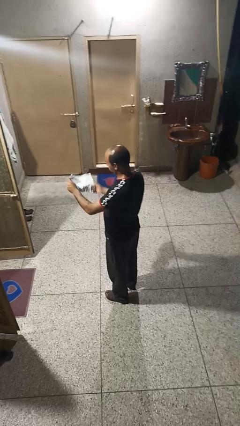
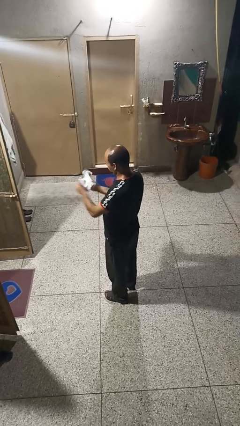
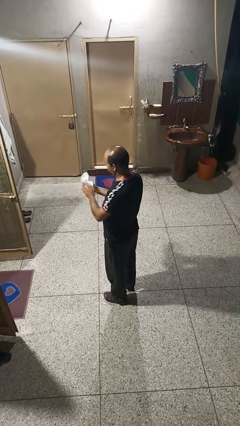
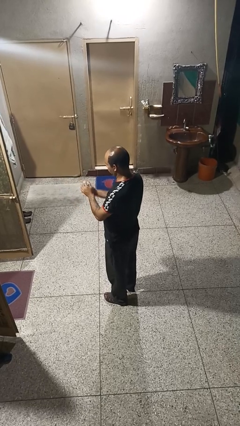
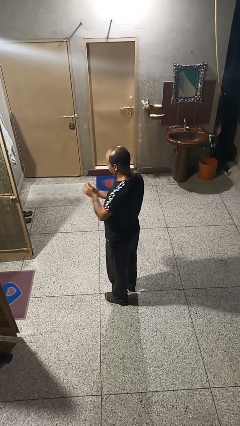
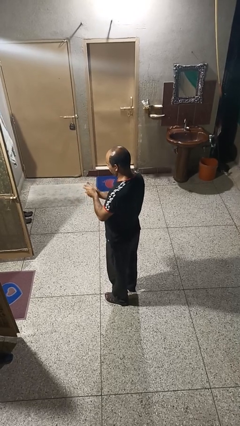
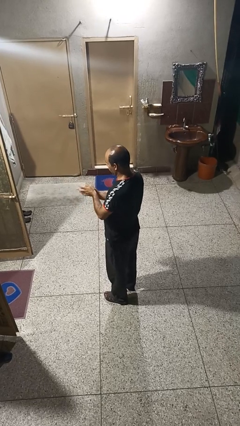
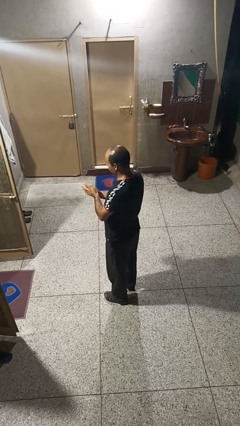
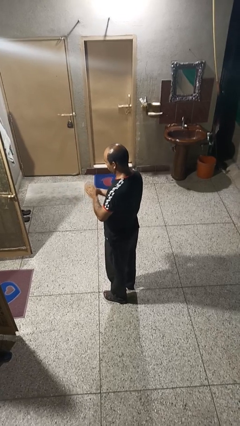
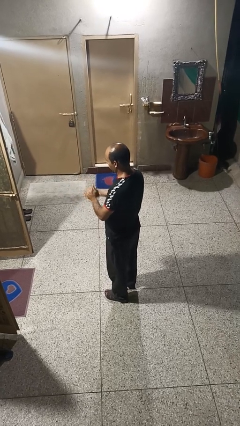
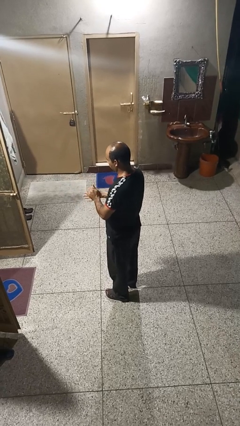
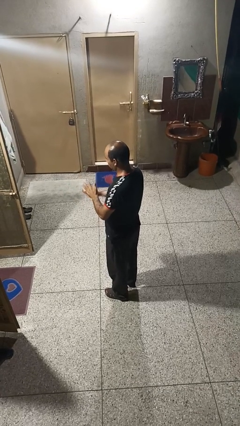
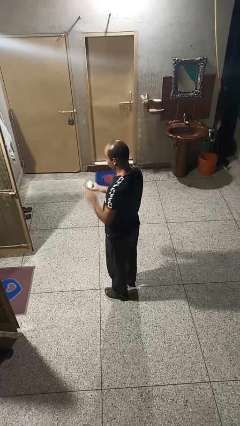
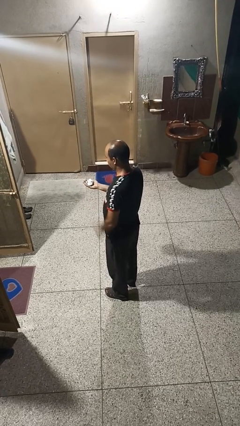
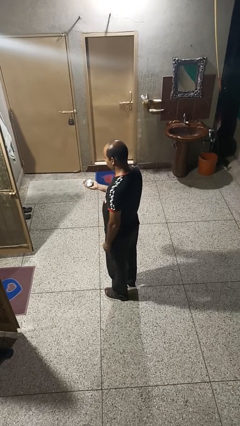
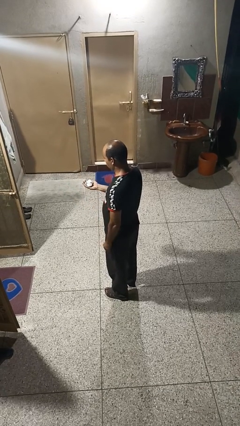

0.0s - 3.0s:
person crumples paper

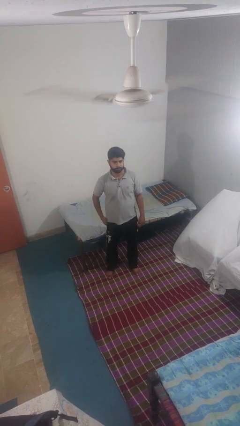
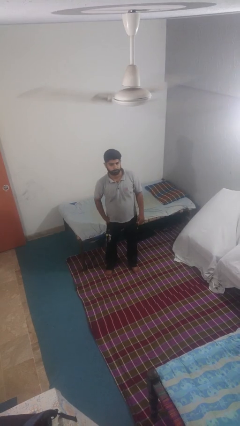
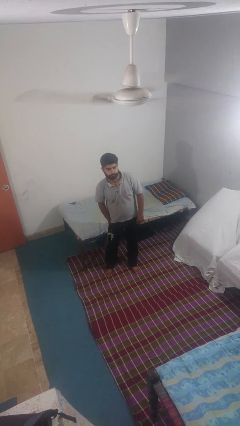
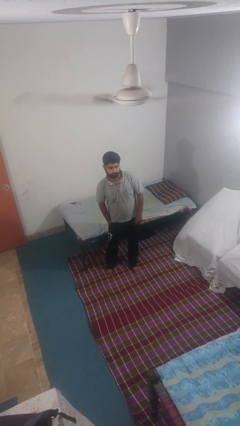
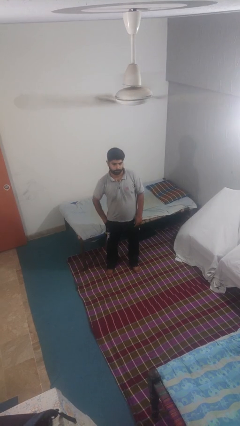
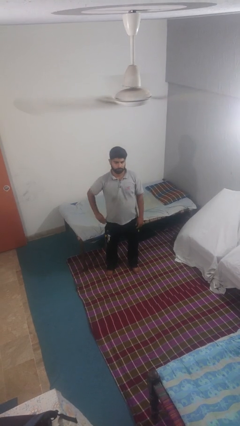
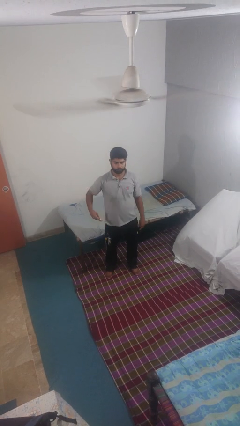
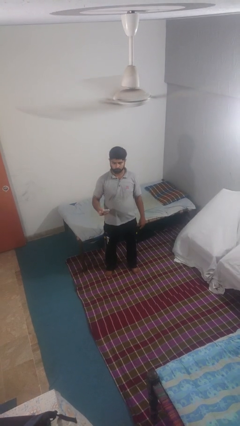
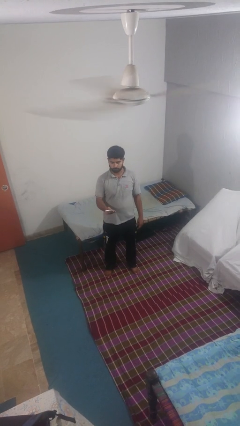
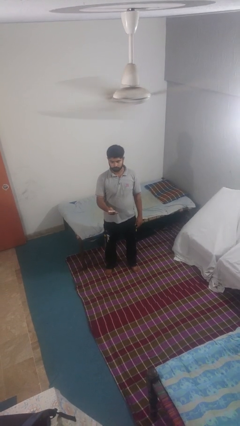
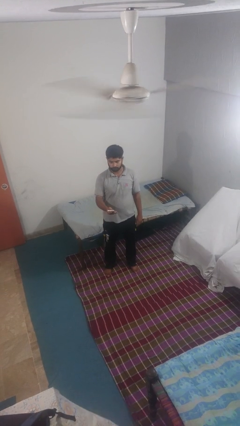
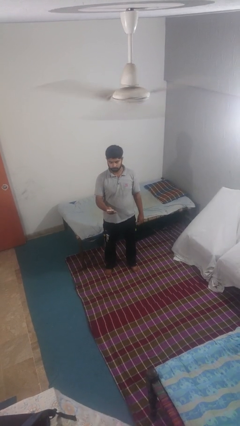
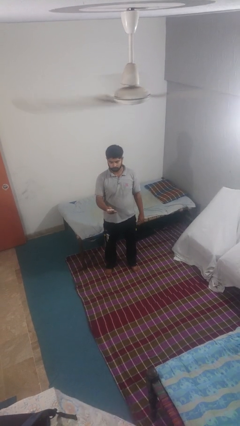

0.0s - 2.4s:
person takes phone from pocket

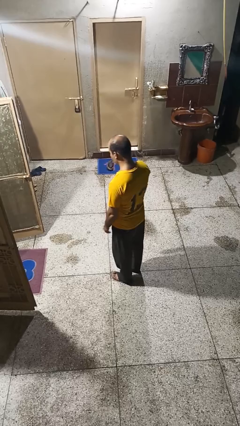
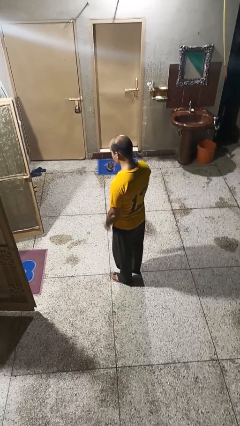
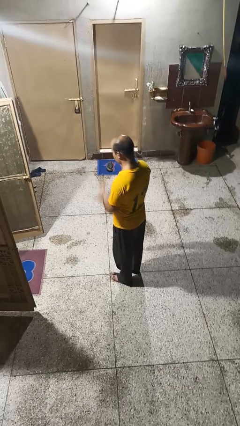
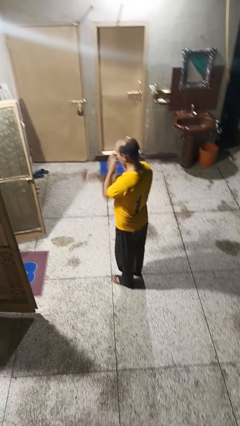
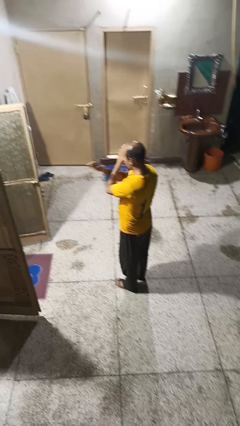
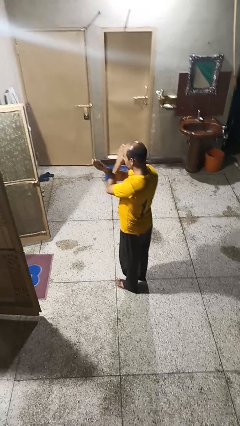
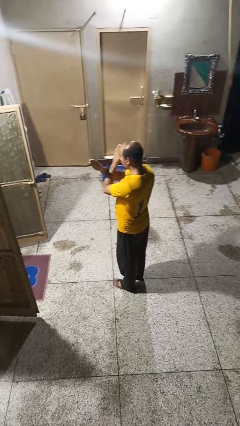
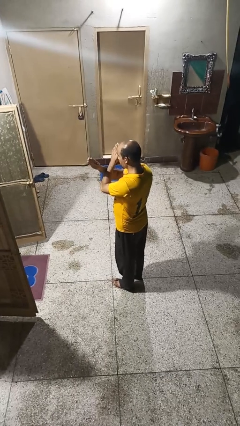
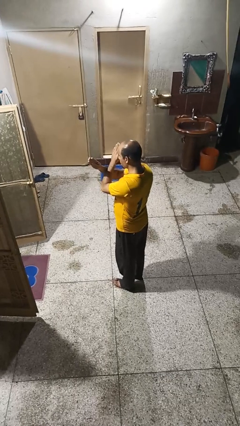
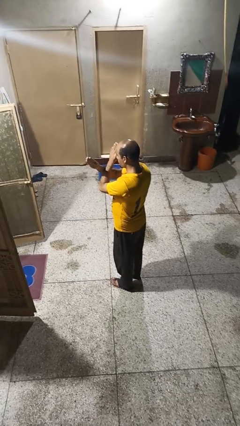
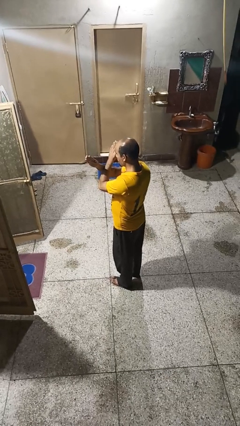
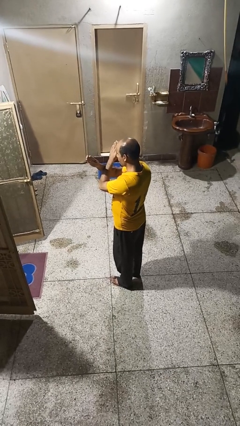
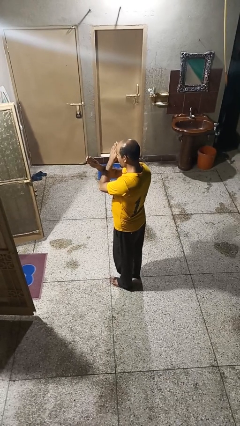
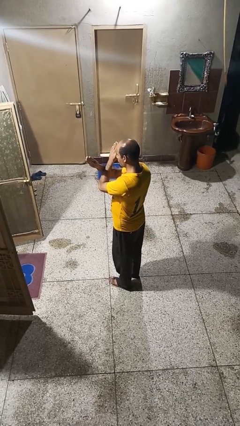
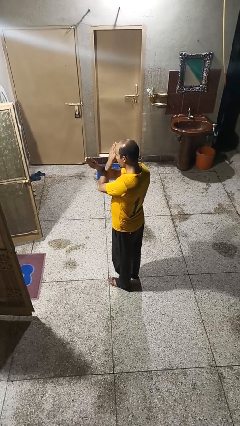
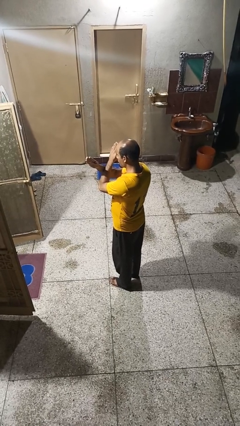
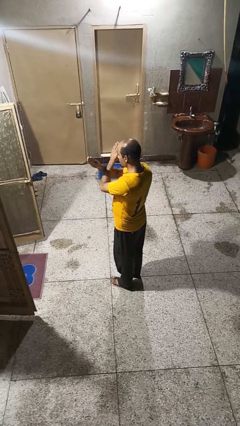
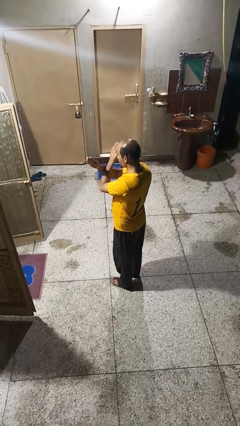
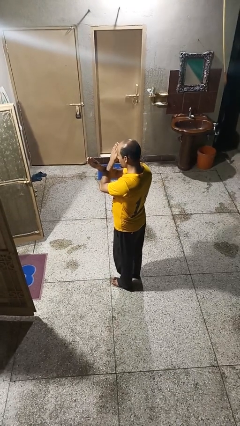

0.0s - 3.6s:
person gestures arms x

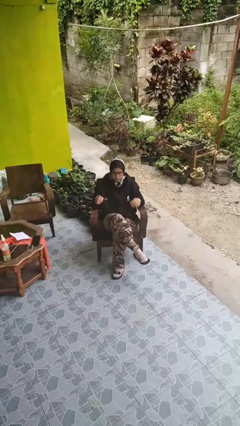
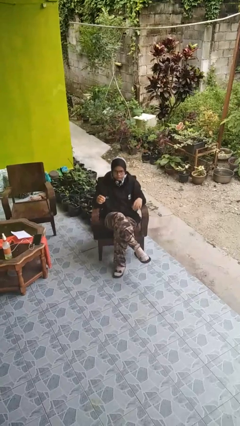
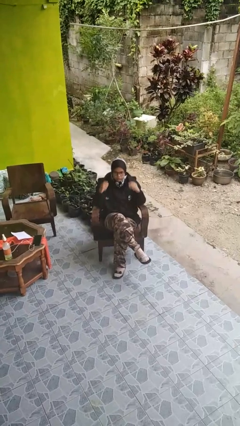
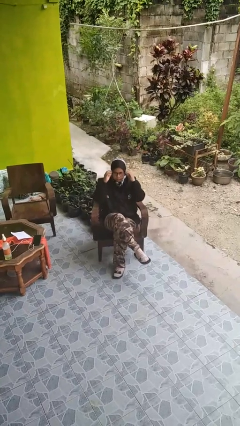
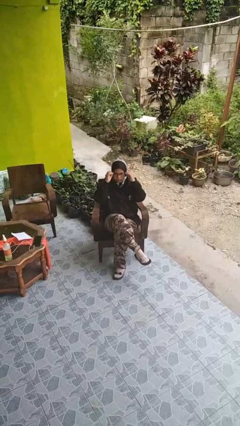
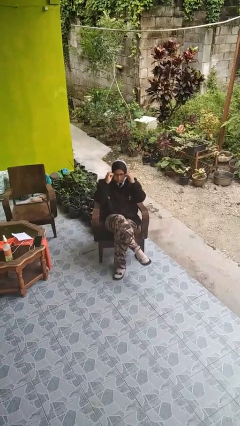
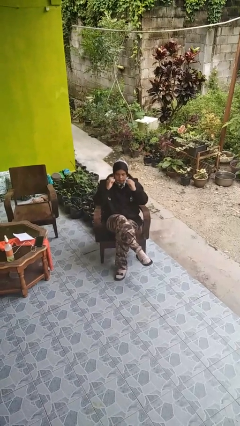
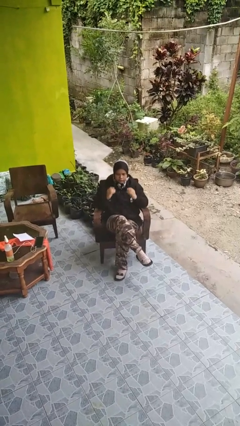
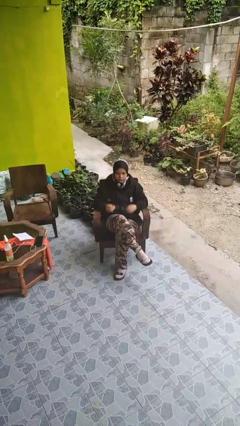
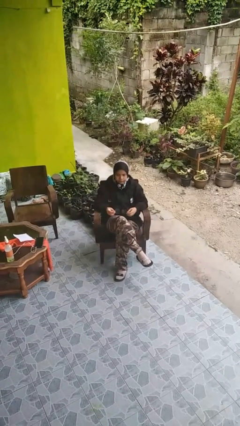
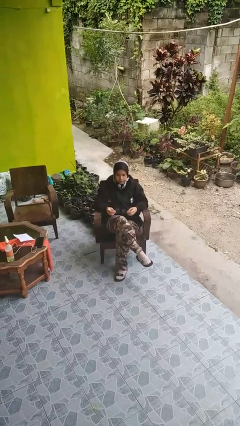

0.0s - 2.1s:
person takes off glasses

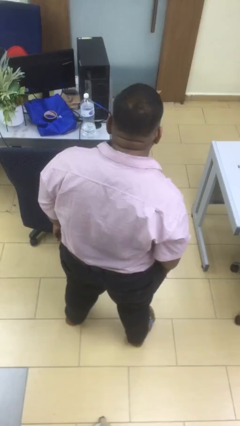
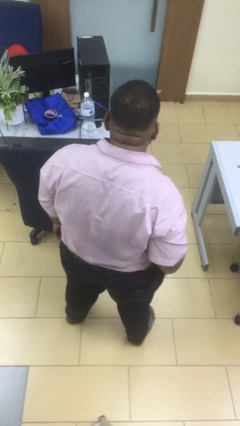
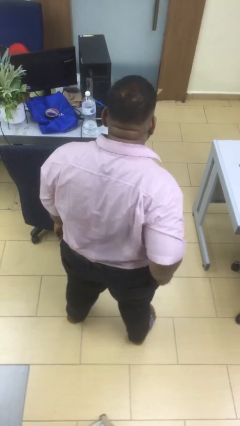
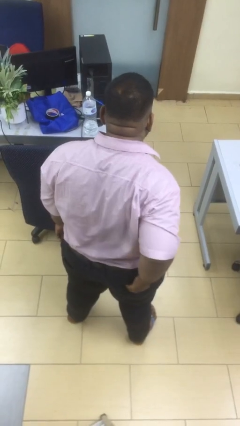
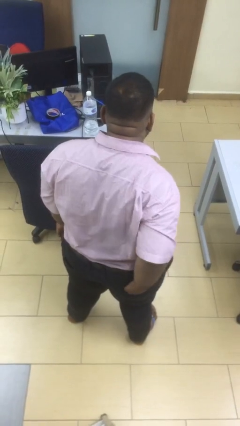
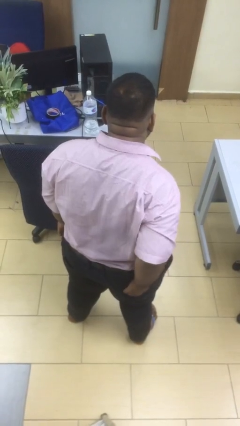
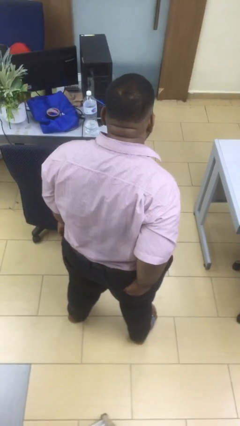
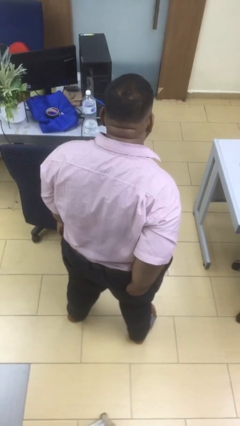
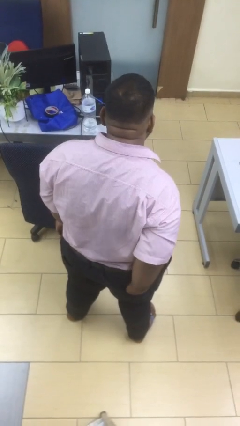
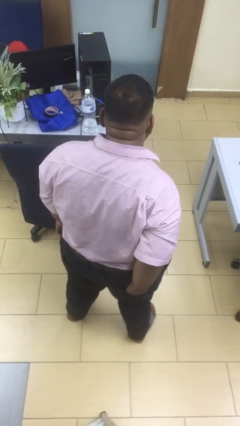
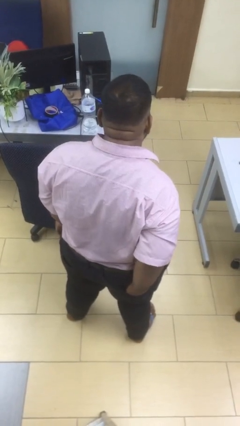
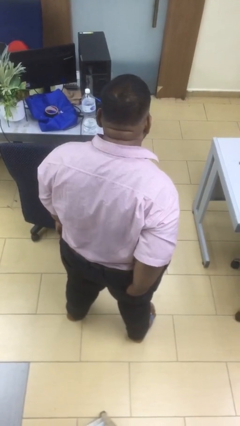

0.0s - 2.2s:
person puts hands in back pockets

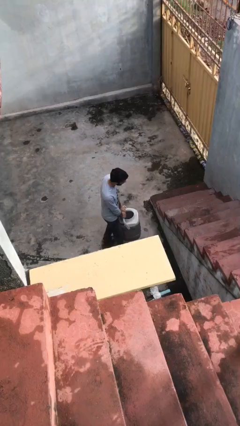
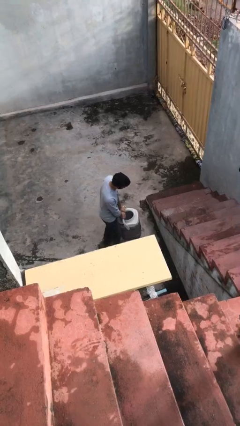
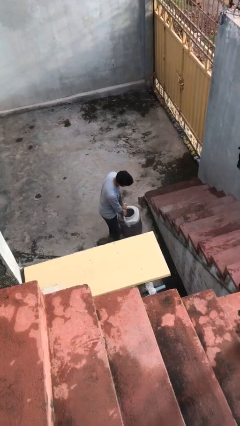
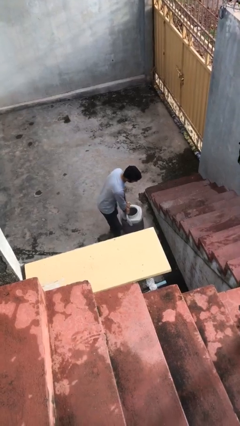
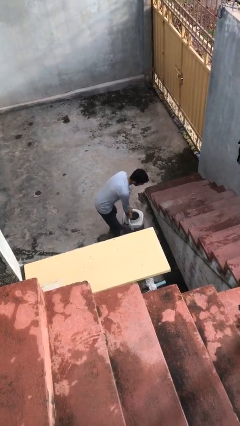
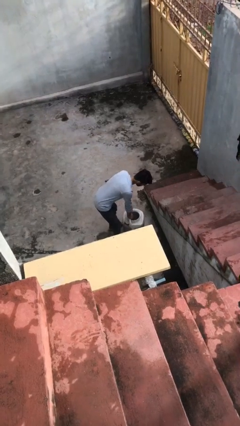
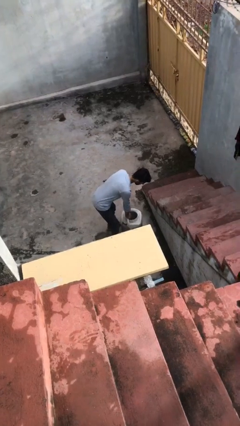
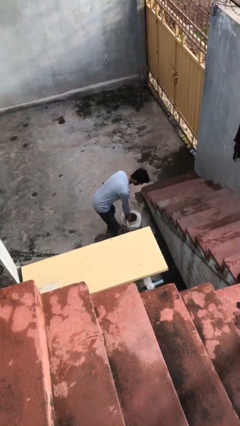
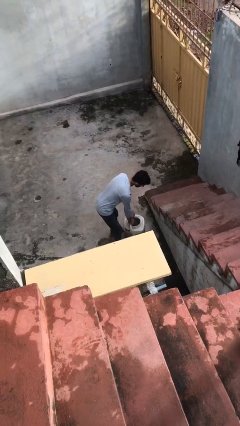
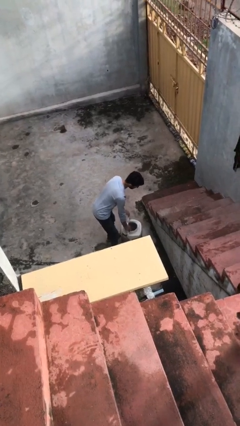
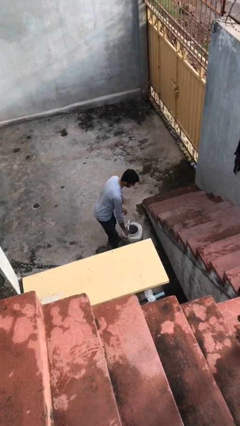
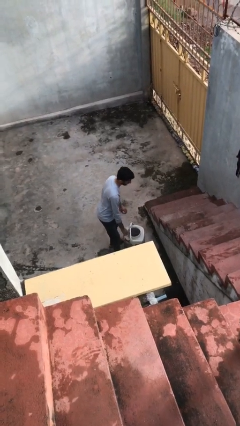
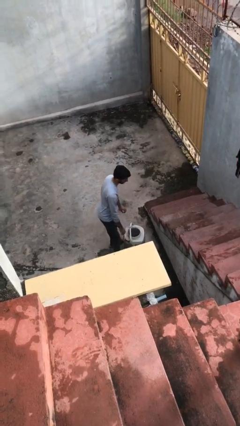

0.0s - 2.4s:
person puts down object on floor

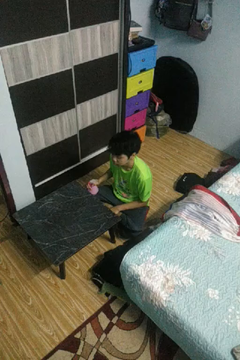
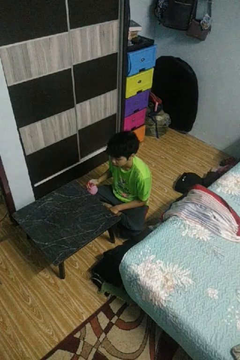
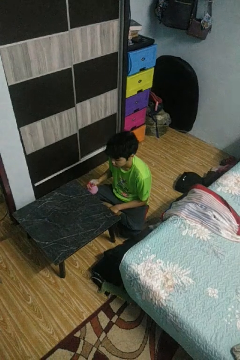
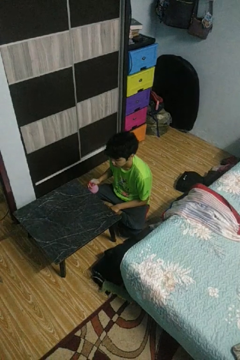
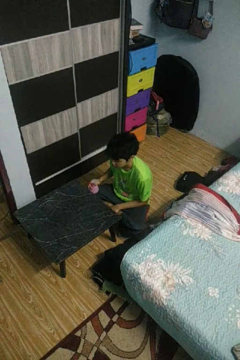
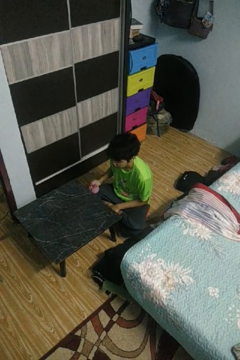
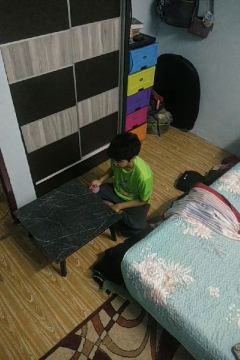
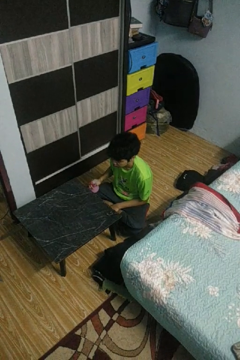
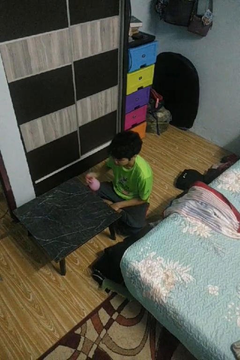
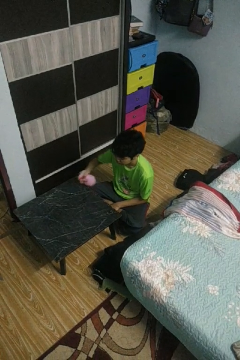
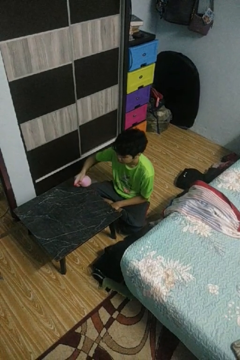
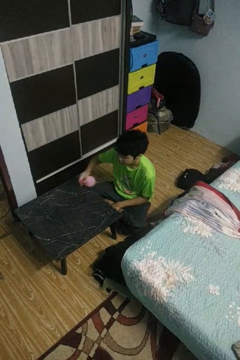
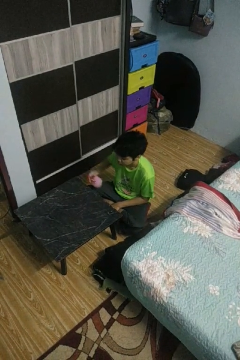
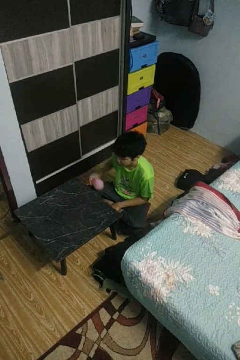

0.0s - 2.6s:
person sprays from bottle
